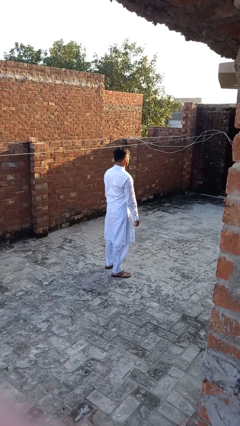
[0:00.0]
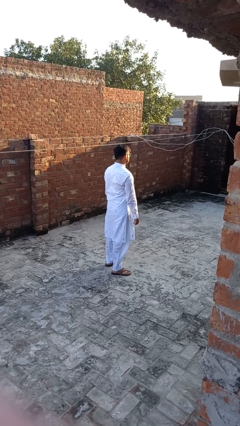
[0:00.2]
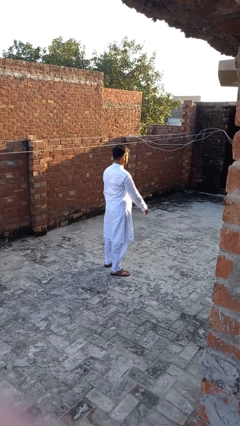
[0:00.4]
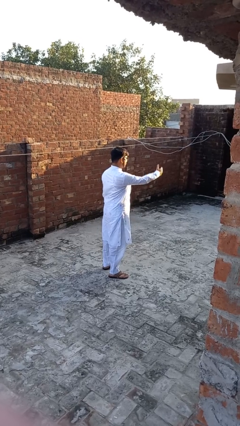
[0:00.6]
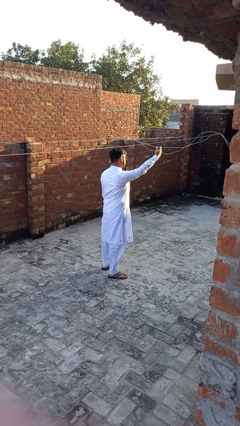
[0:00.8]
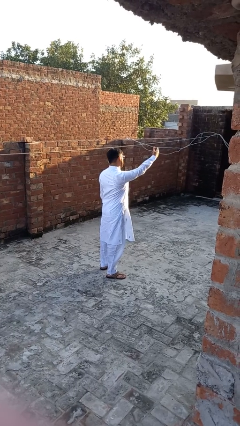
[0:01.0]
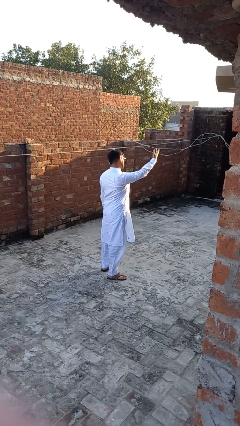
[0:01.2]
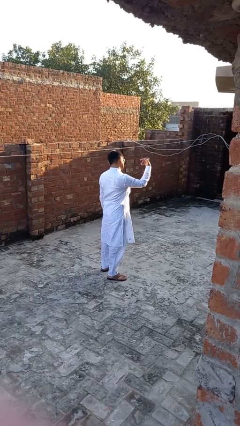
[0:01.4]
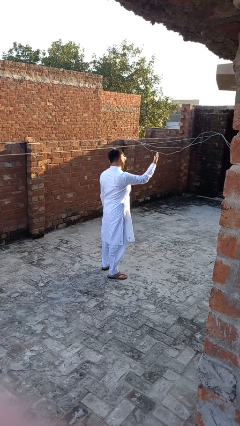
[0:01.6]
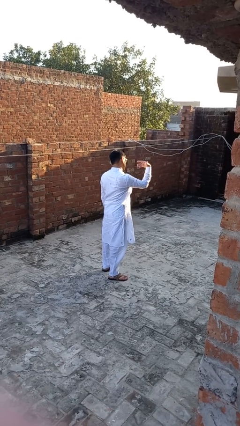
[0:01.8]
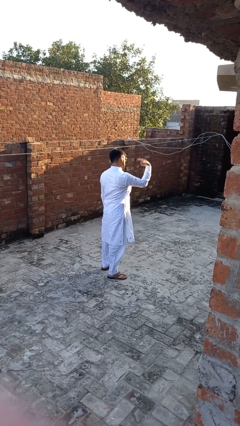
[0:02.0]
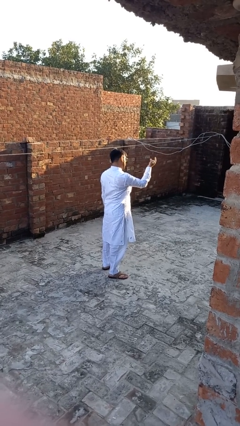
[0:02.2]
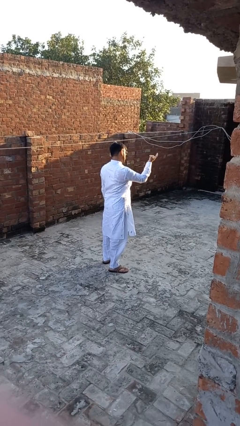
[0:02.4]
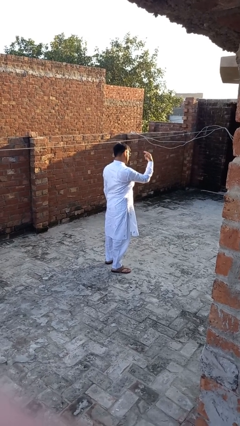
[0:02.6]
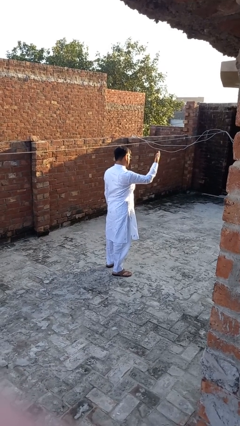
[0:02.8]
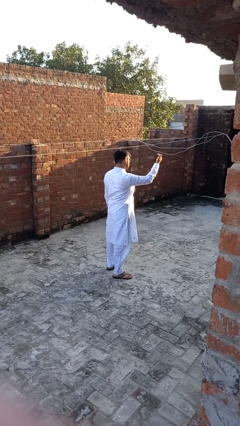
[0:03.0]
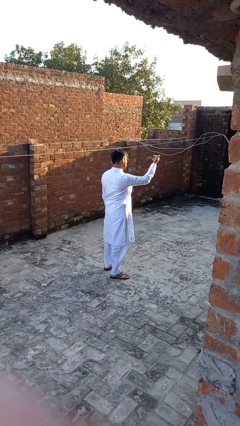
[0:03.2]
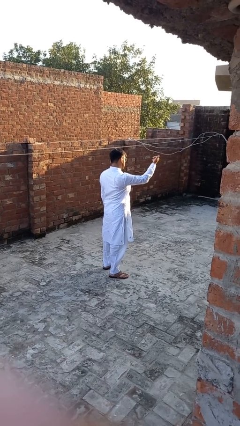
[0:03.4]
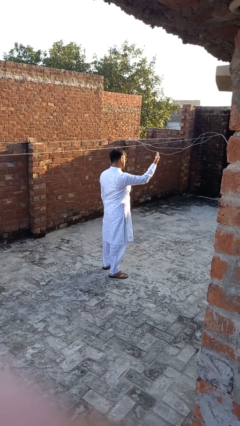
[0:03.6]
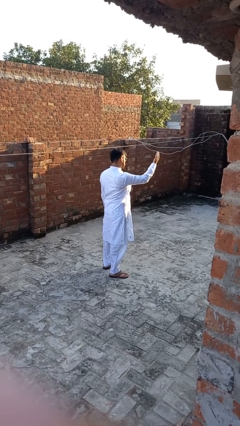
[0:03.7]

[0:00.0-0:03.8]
person gestures come here

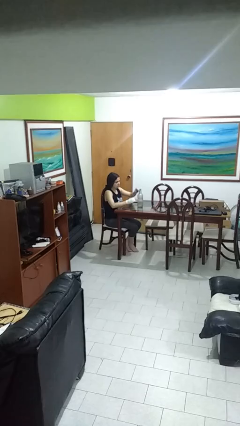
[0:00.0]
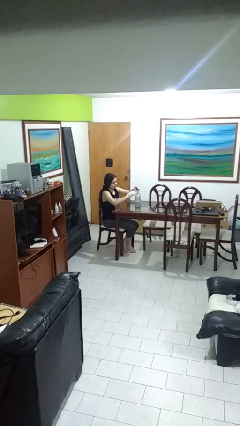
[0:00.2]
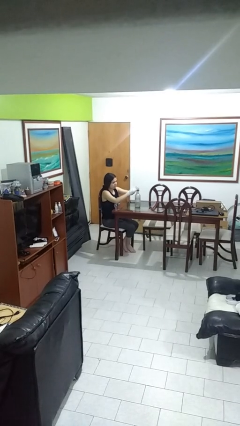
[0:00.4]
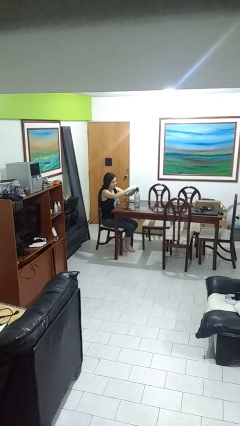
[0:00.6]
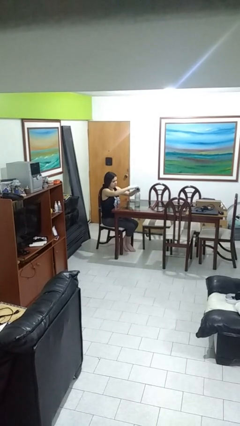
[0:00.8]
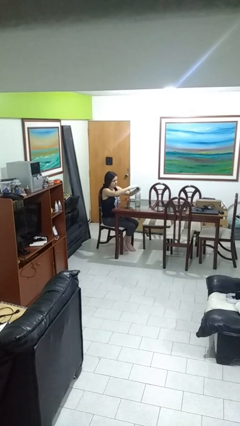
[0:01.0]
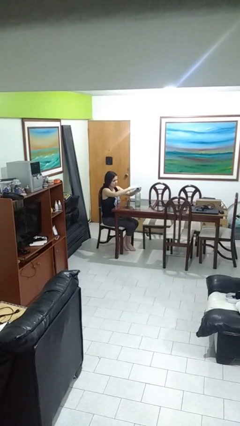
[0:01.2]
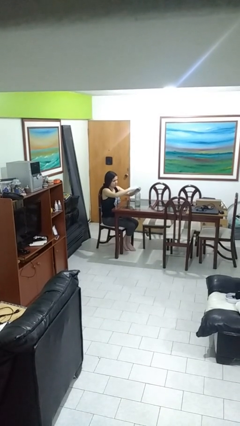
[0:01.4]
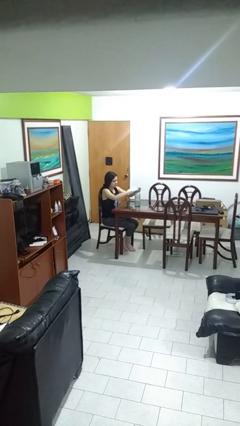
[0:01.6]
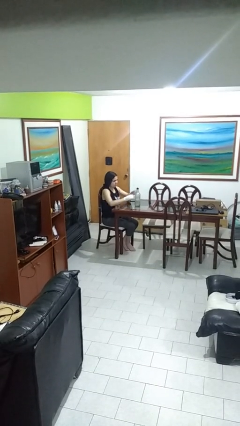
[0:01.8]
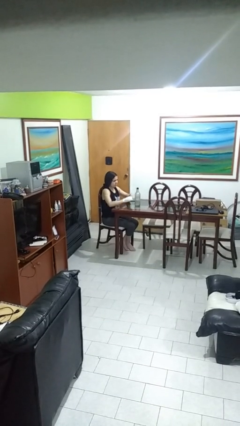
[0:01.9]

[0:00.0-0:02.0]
person screws lid to bottle

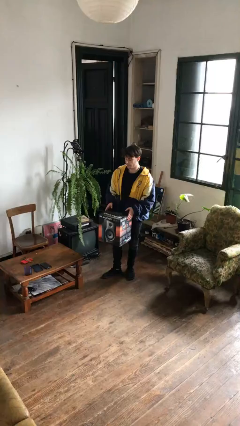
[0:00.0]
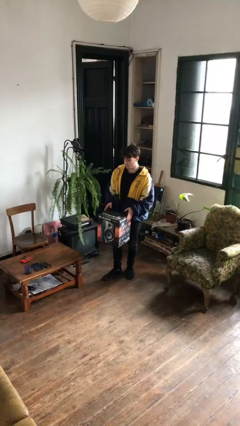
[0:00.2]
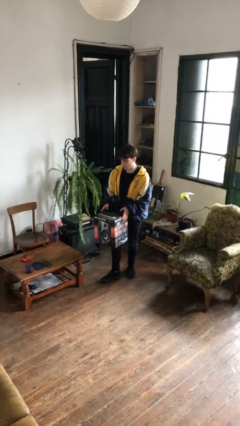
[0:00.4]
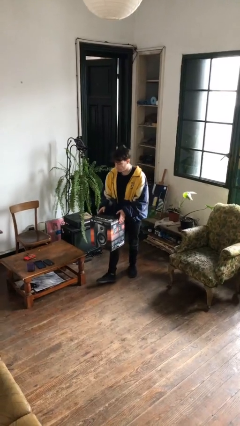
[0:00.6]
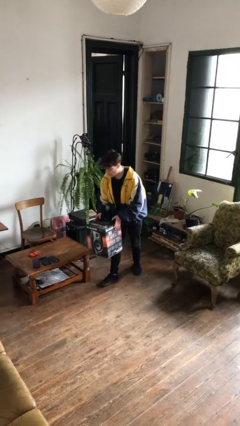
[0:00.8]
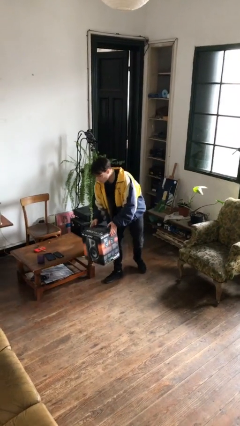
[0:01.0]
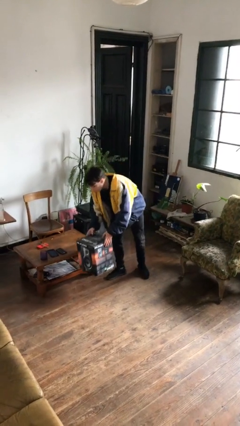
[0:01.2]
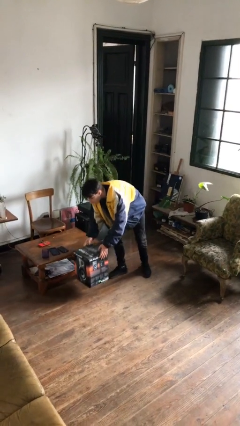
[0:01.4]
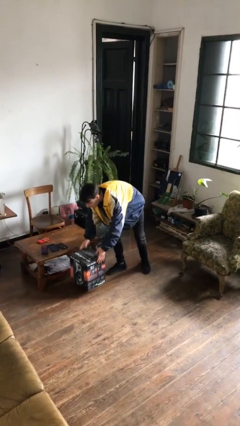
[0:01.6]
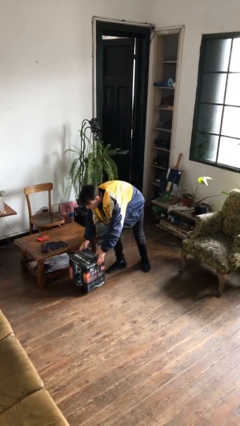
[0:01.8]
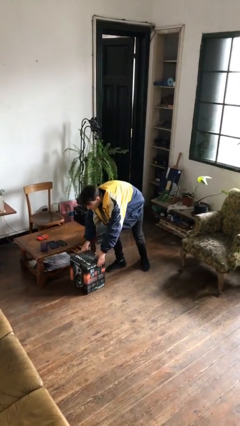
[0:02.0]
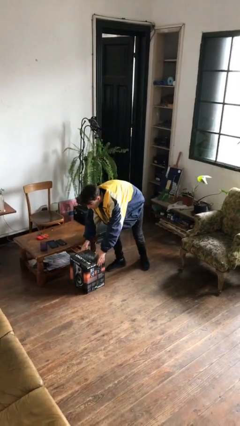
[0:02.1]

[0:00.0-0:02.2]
person puts down object on floor

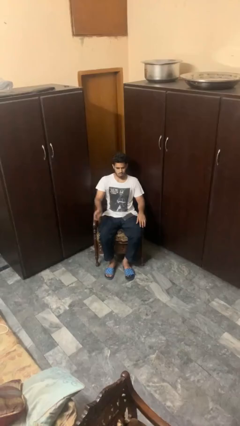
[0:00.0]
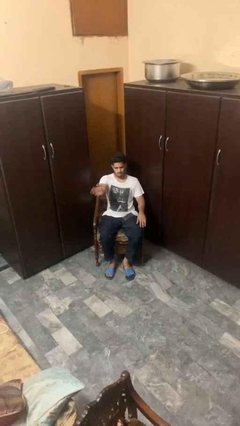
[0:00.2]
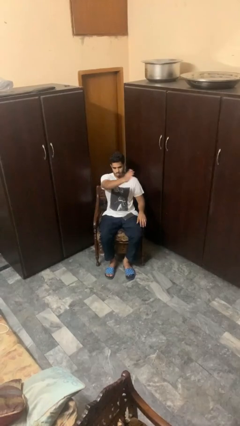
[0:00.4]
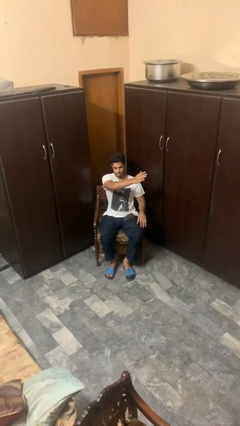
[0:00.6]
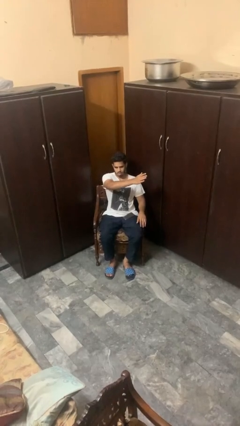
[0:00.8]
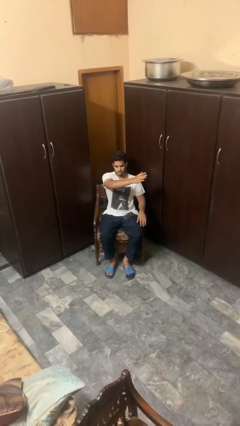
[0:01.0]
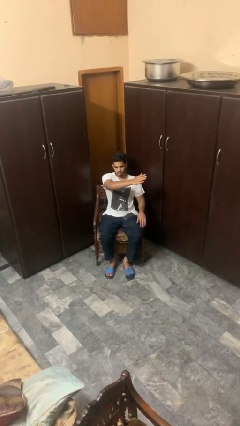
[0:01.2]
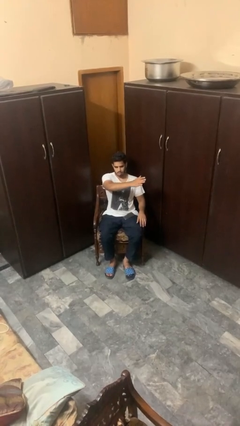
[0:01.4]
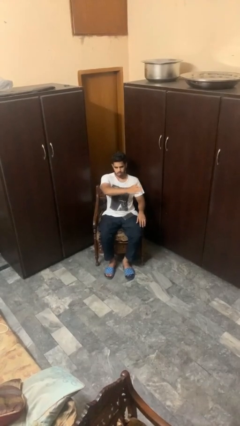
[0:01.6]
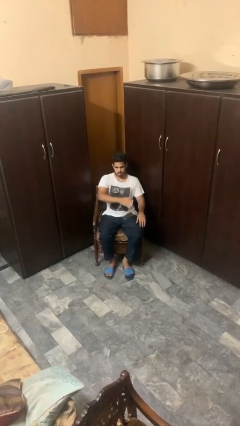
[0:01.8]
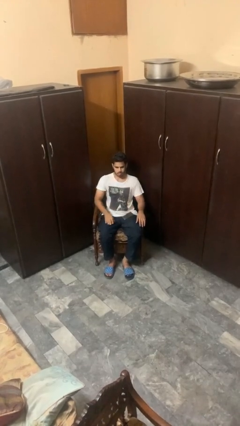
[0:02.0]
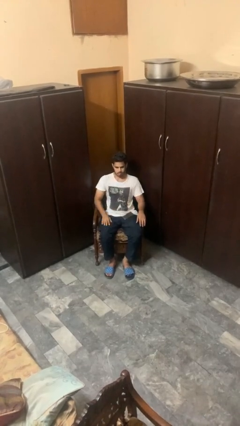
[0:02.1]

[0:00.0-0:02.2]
person gestures swipe left

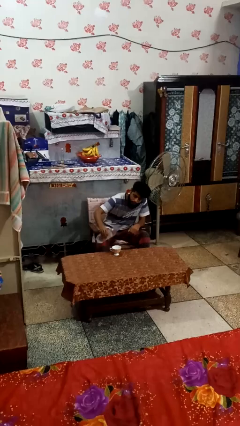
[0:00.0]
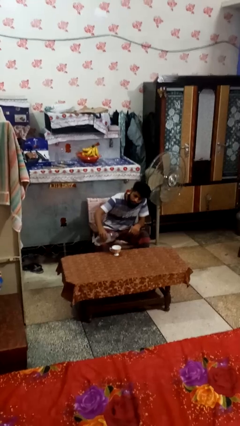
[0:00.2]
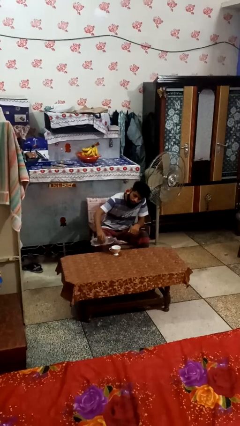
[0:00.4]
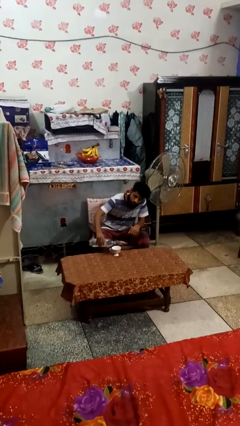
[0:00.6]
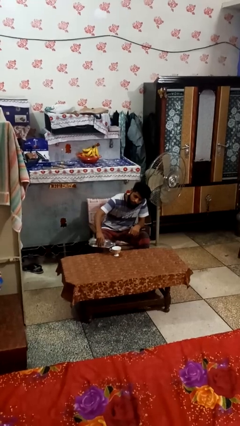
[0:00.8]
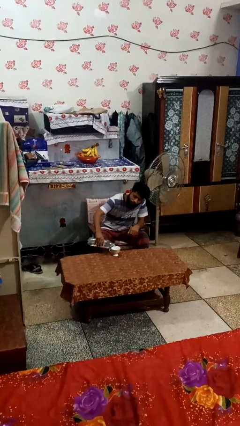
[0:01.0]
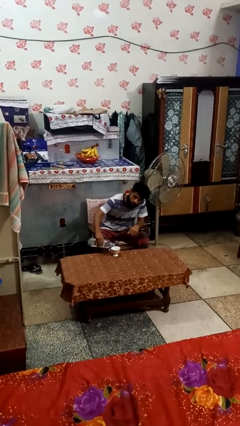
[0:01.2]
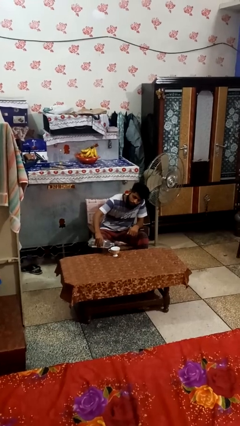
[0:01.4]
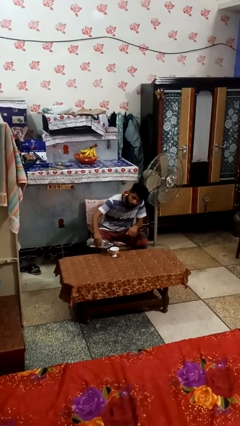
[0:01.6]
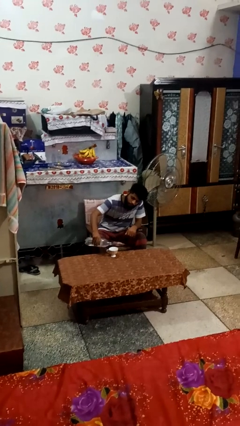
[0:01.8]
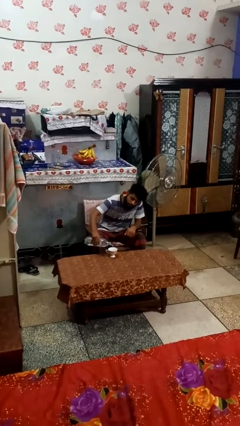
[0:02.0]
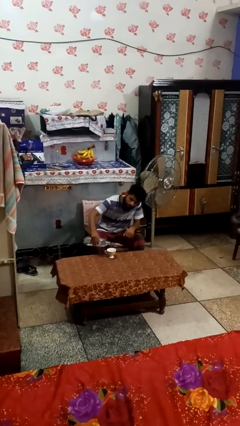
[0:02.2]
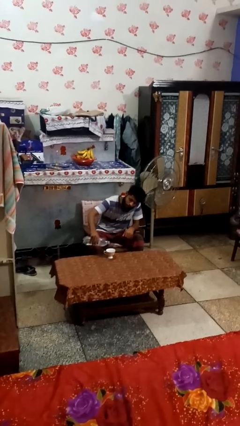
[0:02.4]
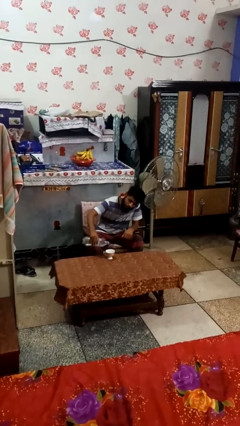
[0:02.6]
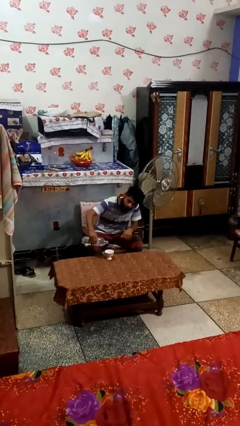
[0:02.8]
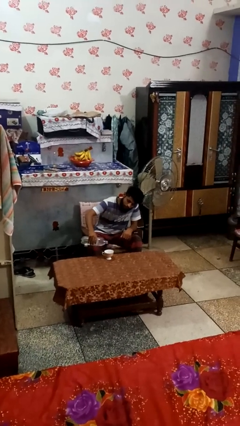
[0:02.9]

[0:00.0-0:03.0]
person pours liquid into cup

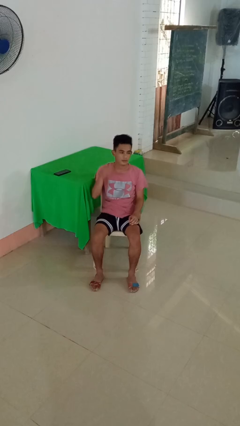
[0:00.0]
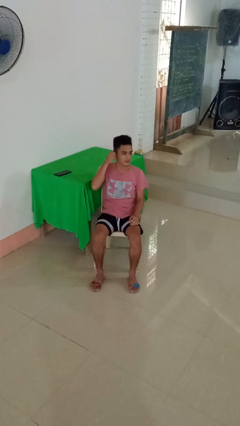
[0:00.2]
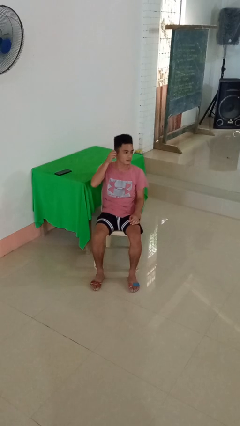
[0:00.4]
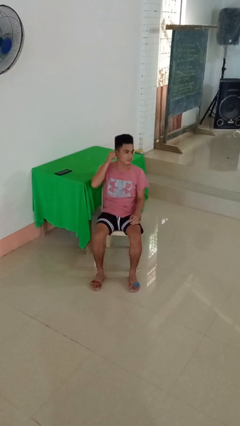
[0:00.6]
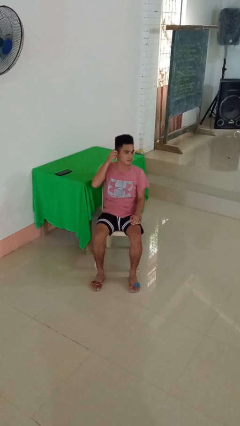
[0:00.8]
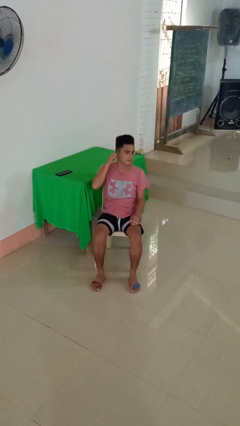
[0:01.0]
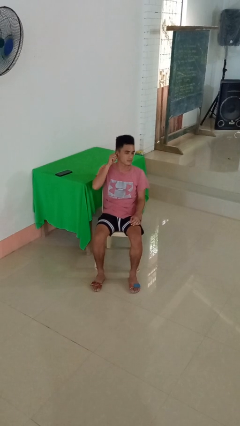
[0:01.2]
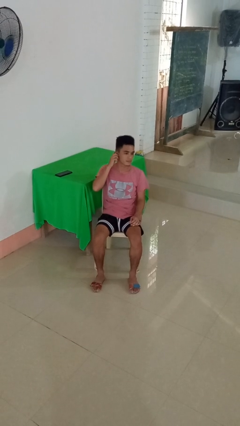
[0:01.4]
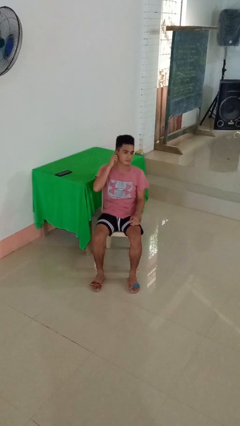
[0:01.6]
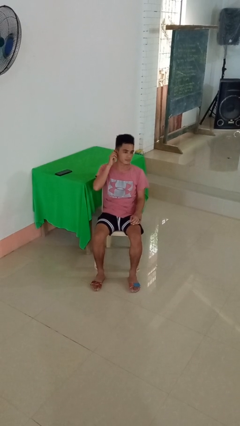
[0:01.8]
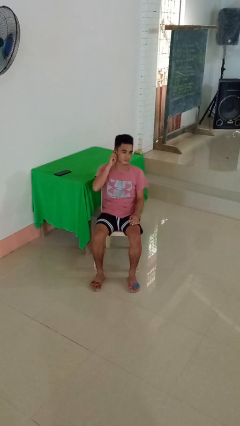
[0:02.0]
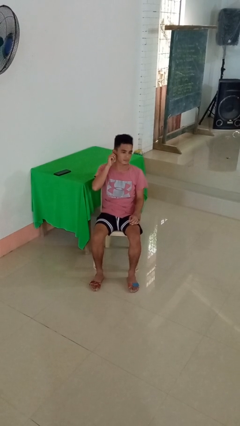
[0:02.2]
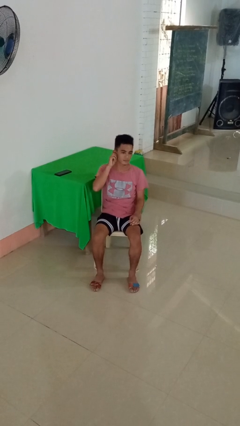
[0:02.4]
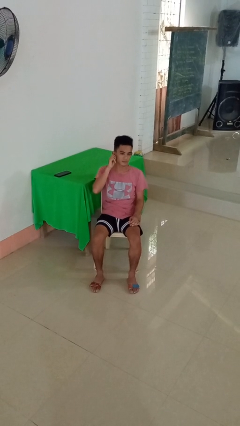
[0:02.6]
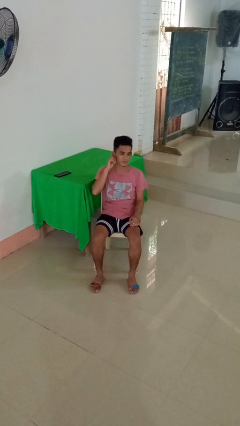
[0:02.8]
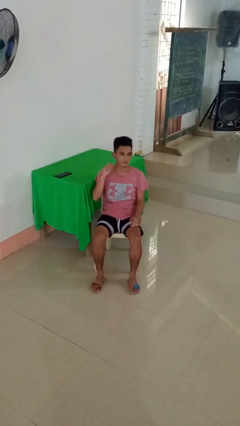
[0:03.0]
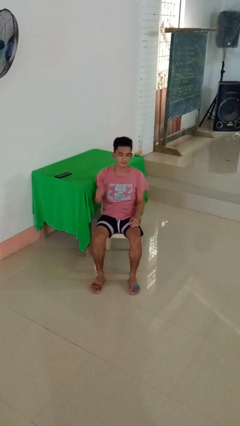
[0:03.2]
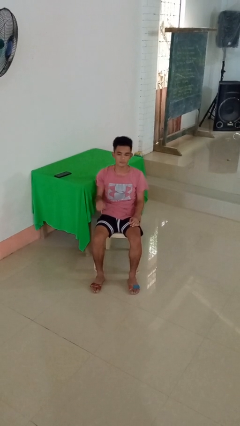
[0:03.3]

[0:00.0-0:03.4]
person touches earlobe

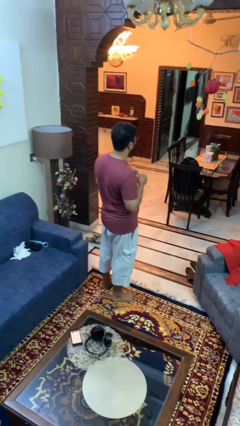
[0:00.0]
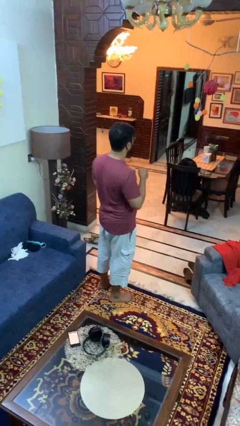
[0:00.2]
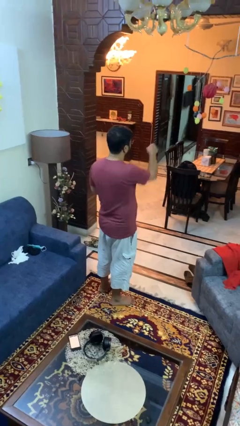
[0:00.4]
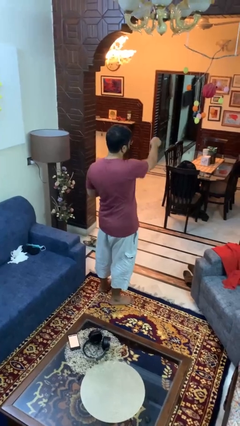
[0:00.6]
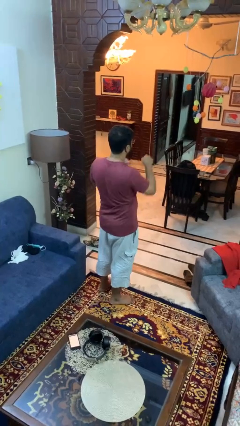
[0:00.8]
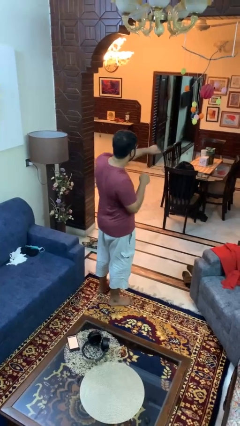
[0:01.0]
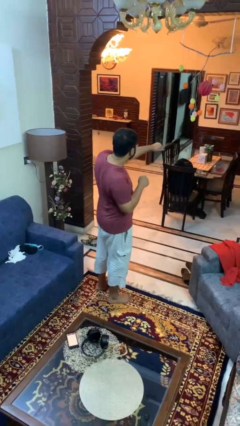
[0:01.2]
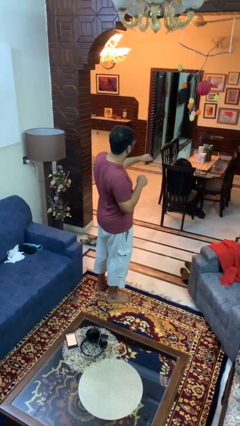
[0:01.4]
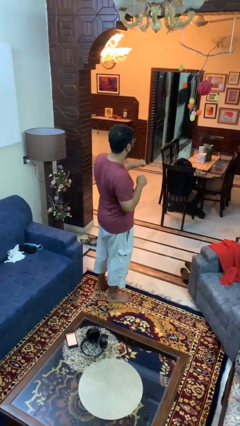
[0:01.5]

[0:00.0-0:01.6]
person punches
